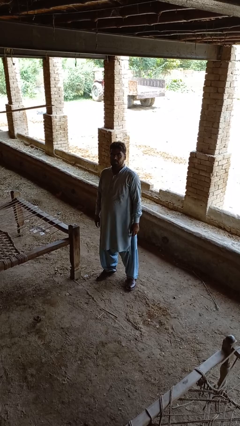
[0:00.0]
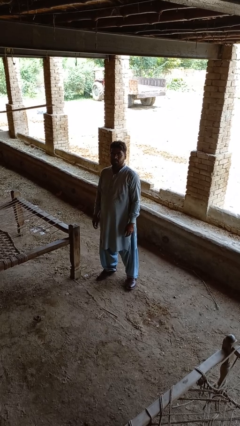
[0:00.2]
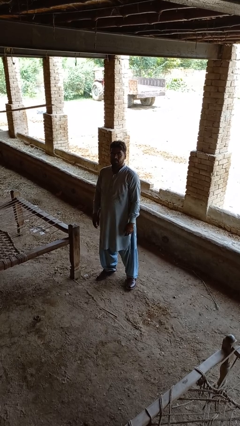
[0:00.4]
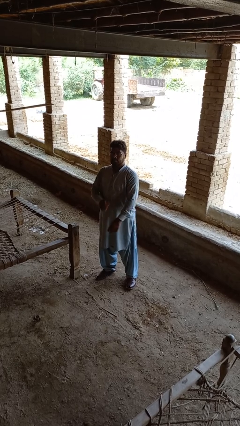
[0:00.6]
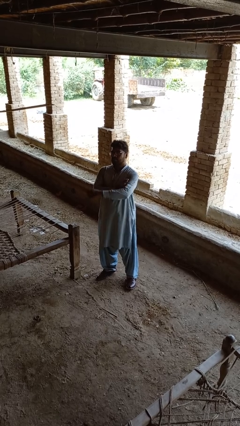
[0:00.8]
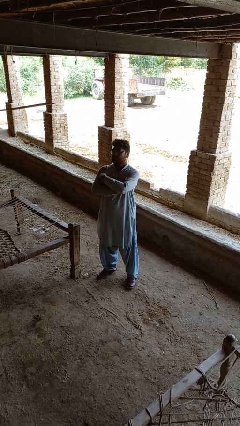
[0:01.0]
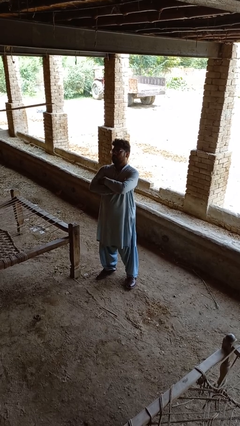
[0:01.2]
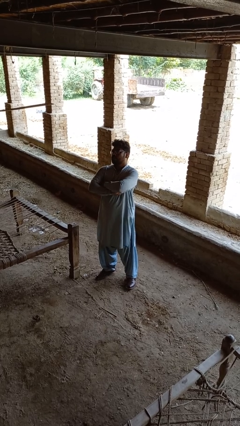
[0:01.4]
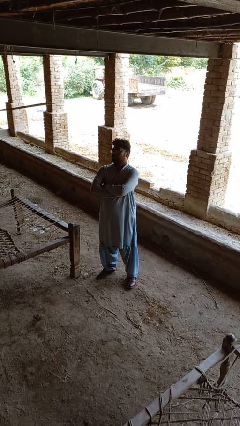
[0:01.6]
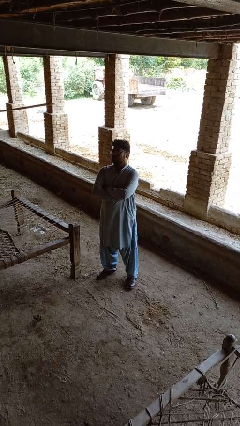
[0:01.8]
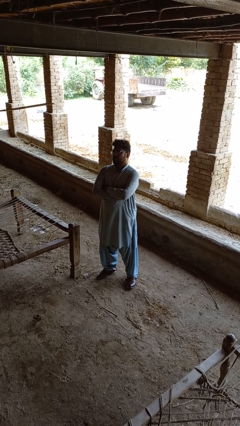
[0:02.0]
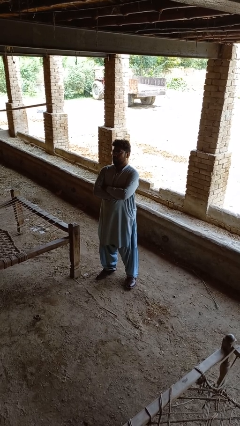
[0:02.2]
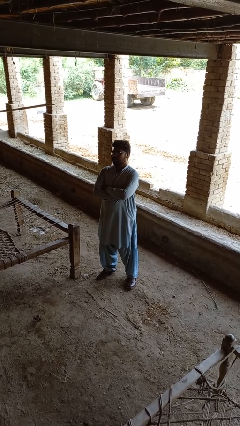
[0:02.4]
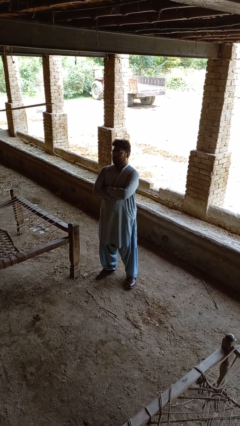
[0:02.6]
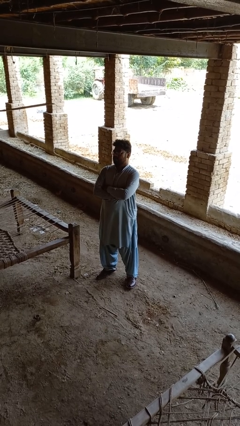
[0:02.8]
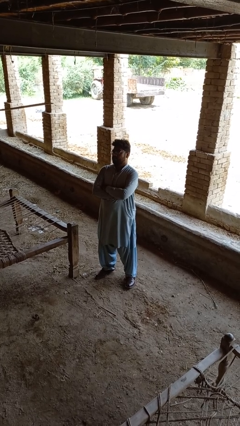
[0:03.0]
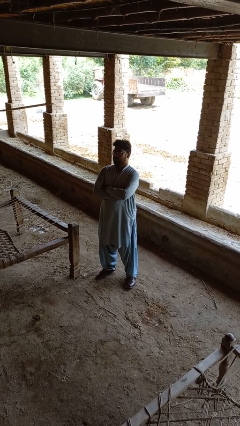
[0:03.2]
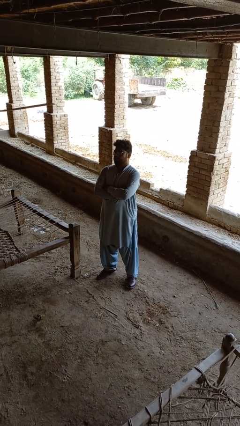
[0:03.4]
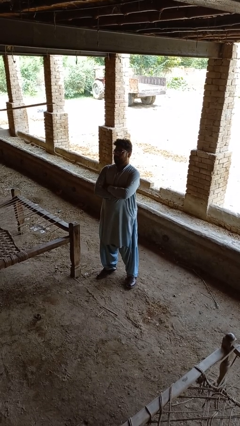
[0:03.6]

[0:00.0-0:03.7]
person crosses arms

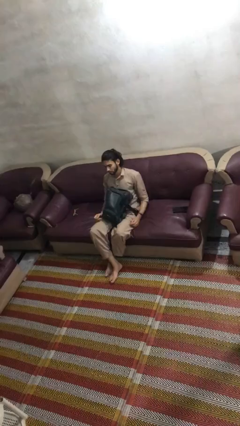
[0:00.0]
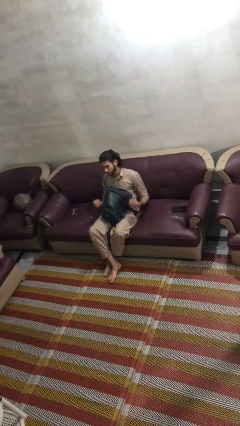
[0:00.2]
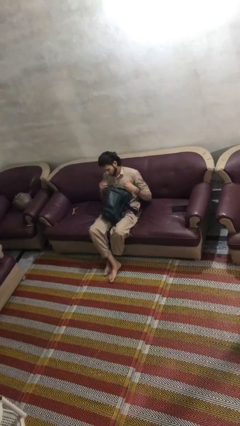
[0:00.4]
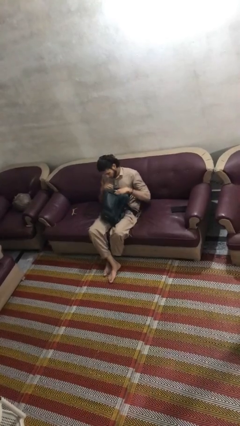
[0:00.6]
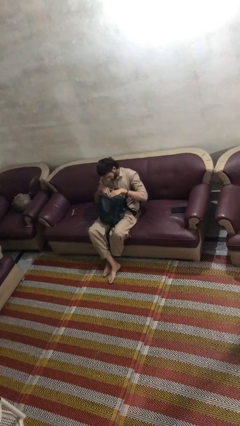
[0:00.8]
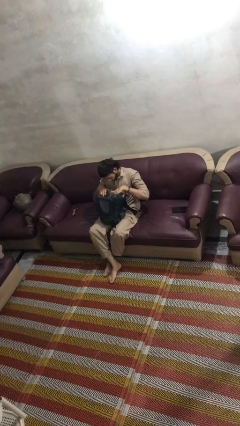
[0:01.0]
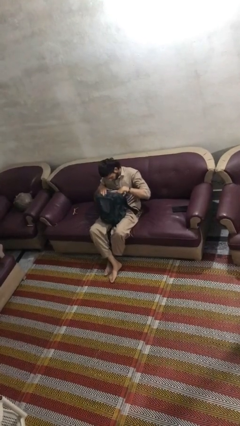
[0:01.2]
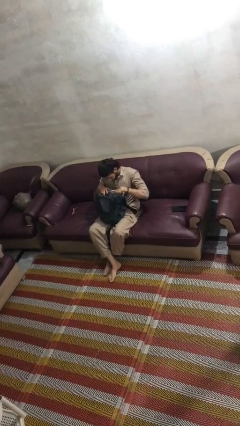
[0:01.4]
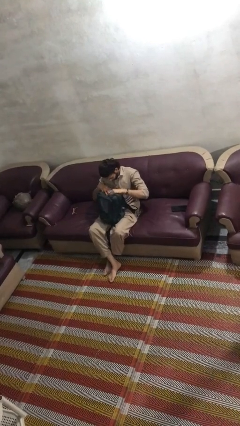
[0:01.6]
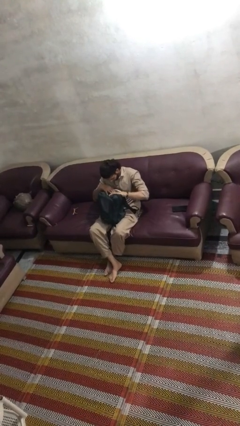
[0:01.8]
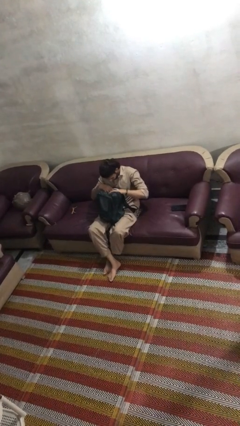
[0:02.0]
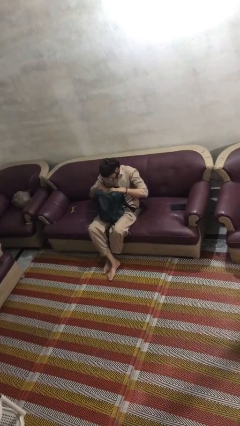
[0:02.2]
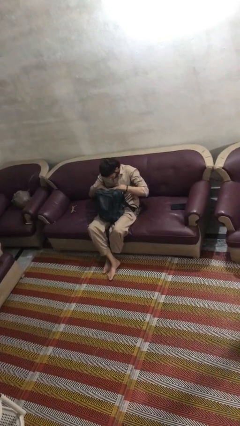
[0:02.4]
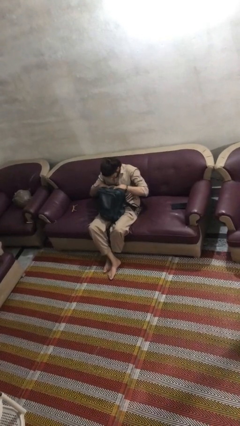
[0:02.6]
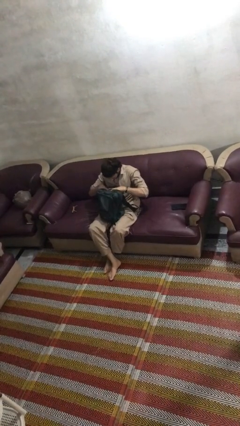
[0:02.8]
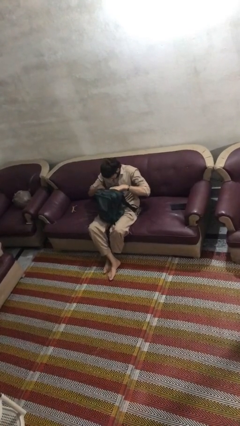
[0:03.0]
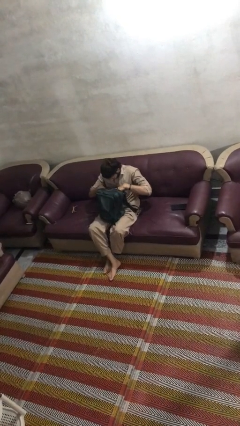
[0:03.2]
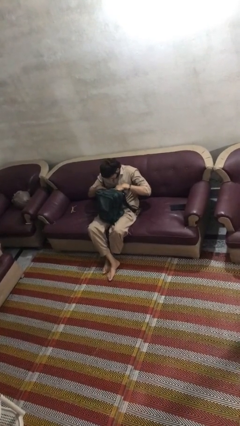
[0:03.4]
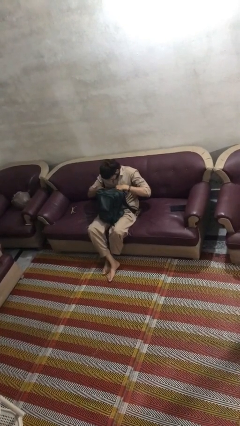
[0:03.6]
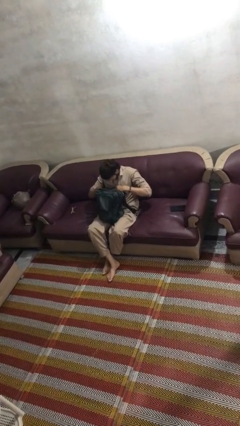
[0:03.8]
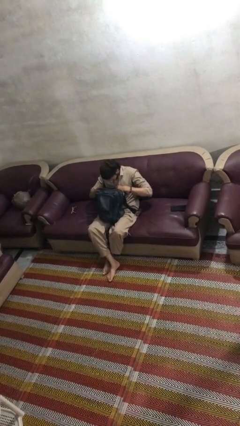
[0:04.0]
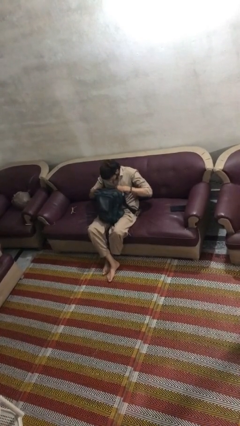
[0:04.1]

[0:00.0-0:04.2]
person searches in backpack

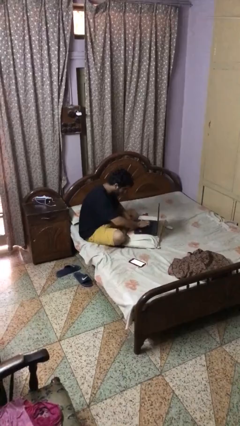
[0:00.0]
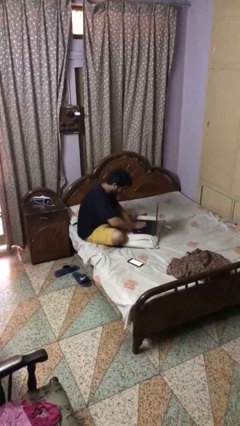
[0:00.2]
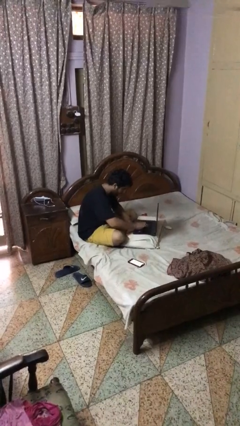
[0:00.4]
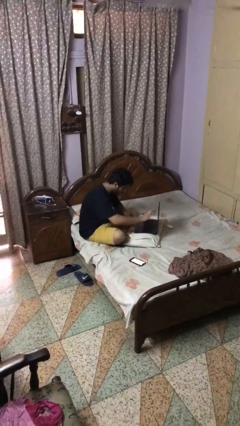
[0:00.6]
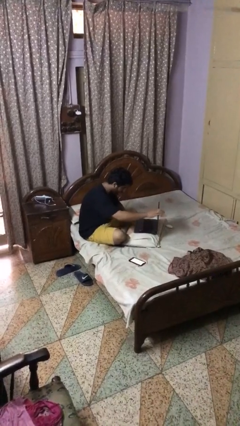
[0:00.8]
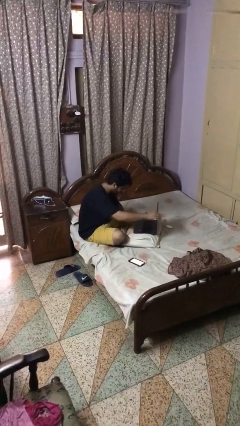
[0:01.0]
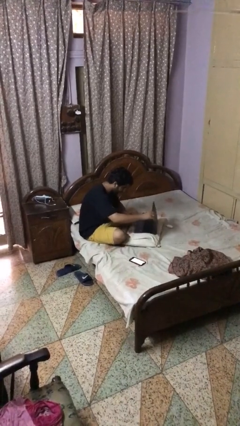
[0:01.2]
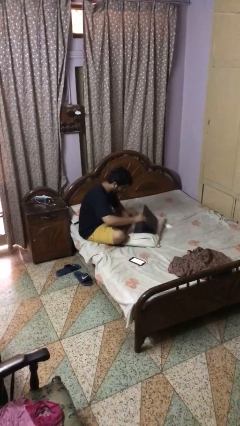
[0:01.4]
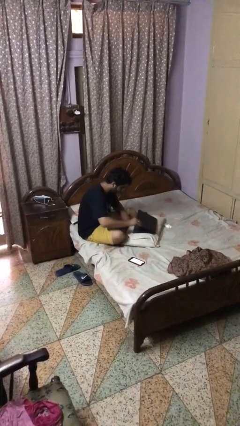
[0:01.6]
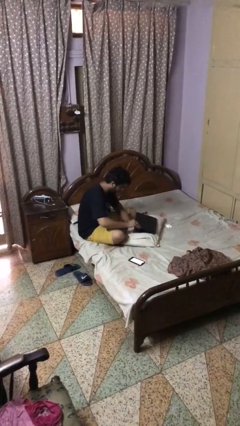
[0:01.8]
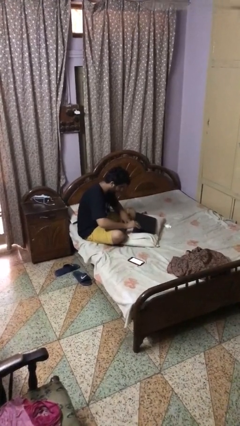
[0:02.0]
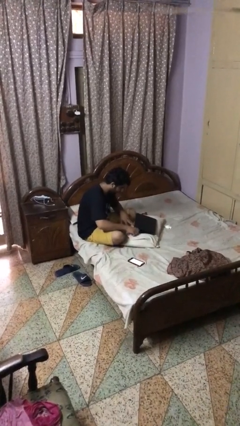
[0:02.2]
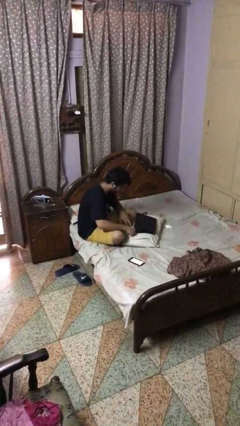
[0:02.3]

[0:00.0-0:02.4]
person closes laptop

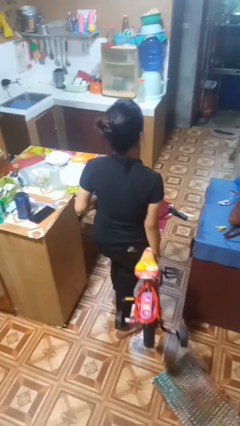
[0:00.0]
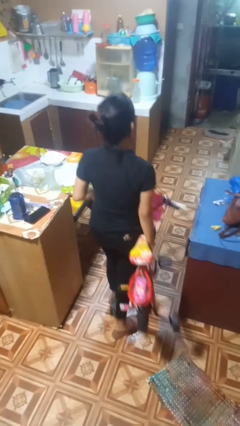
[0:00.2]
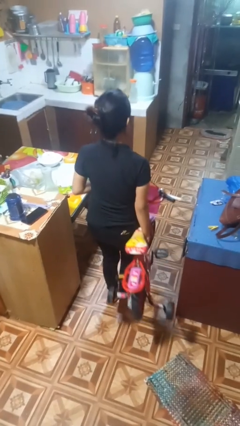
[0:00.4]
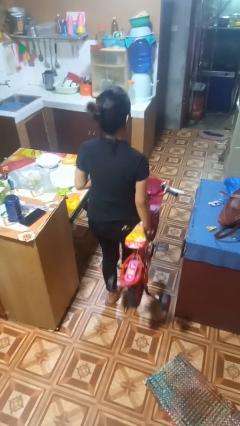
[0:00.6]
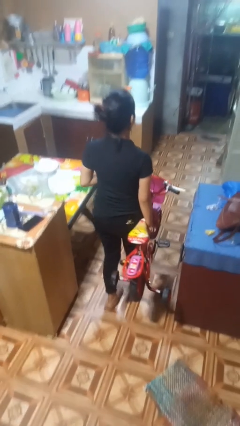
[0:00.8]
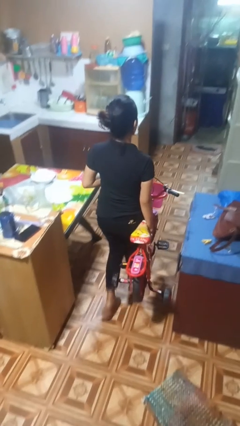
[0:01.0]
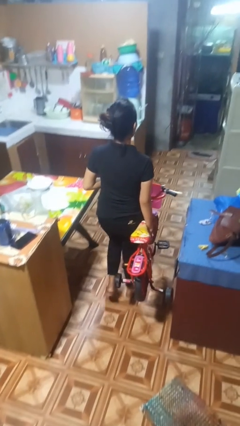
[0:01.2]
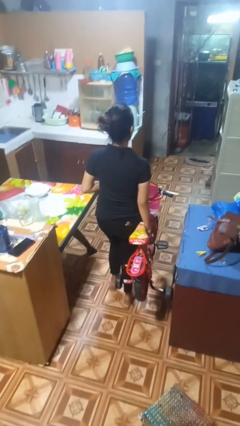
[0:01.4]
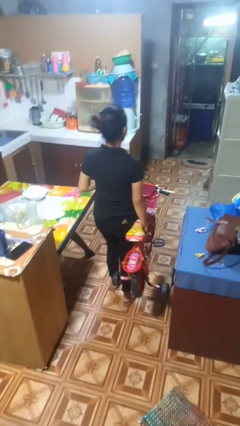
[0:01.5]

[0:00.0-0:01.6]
person carries bicycle

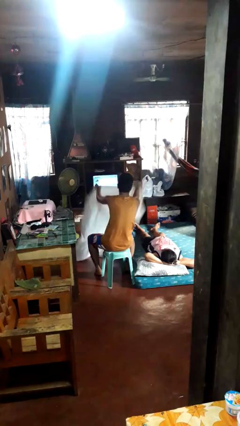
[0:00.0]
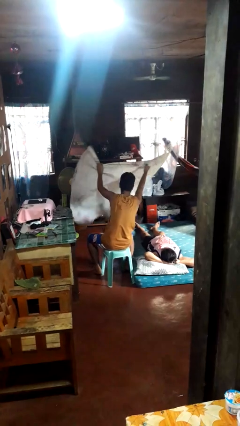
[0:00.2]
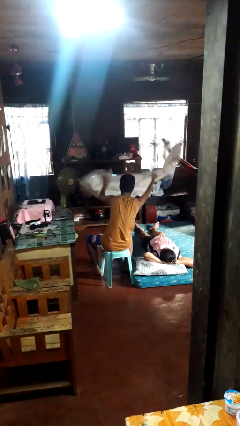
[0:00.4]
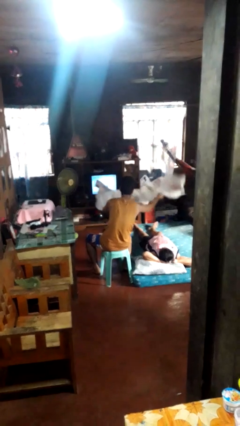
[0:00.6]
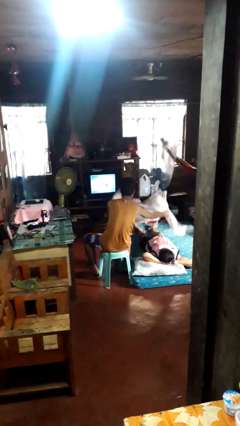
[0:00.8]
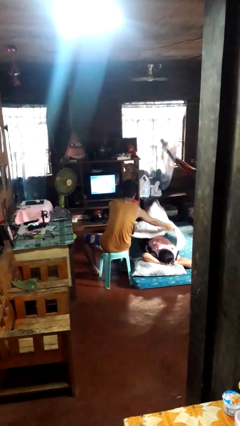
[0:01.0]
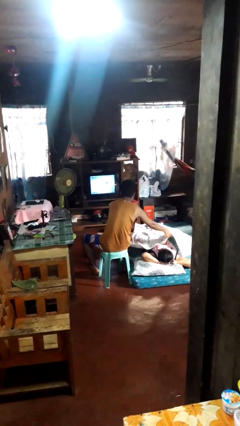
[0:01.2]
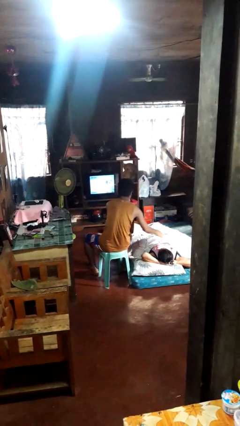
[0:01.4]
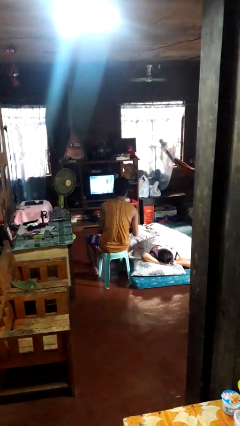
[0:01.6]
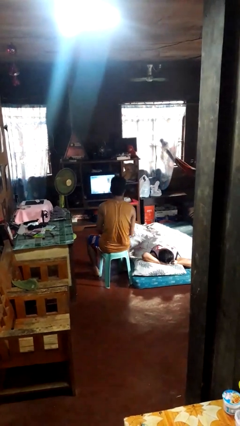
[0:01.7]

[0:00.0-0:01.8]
person covers friend with blanket

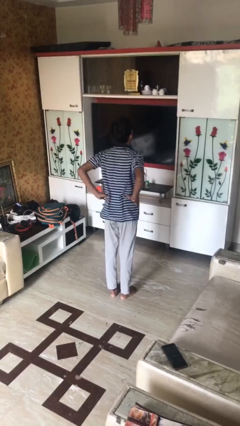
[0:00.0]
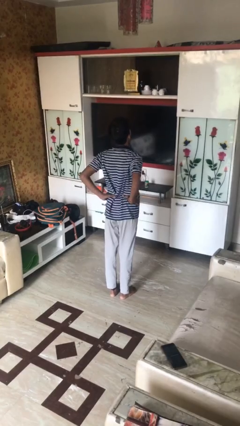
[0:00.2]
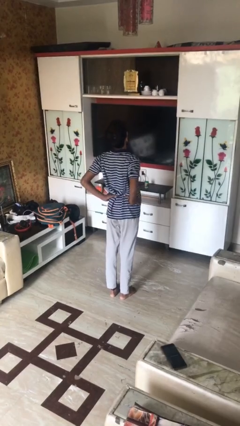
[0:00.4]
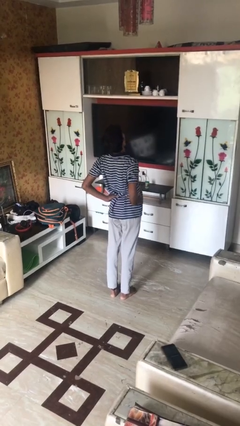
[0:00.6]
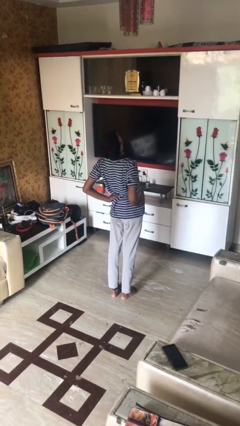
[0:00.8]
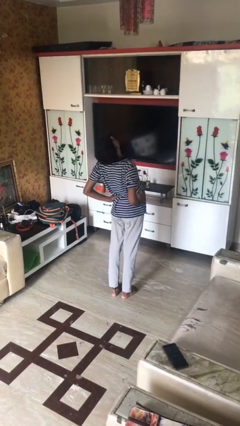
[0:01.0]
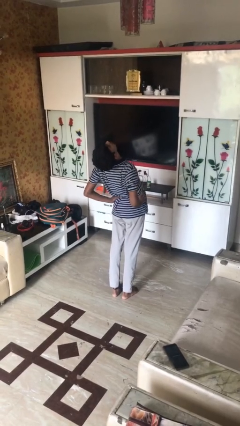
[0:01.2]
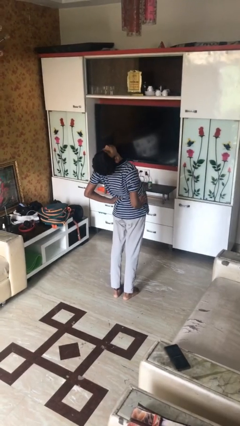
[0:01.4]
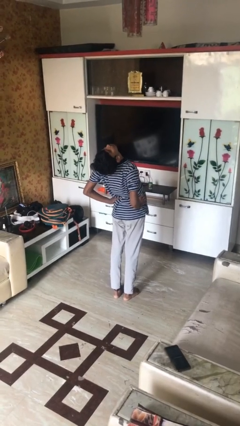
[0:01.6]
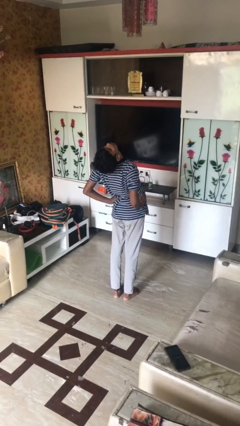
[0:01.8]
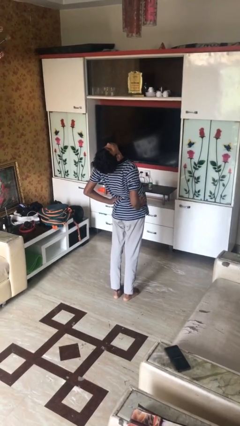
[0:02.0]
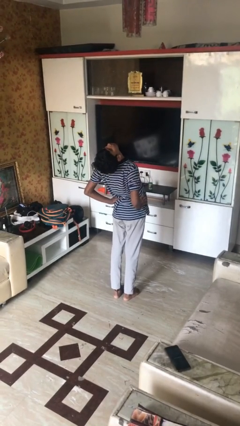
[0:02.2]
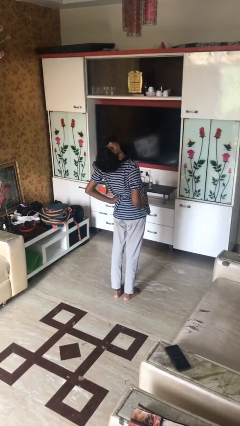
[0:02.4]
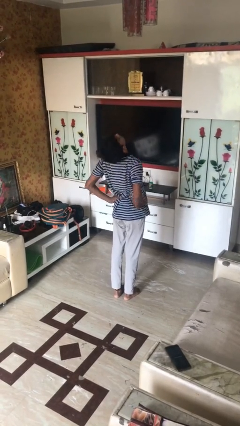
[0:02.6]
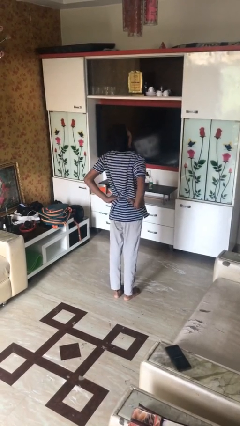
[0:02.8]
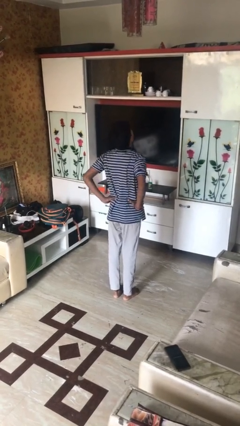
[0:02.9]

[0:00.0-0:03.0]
person stretches back

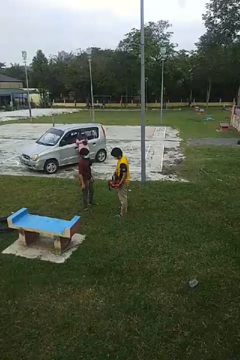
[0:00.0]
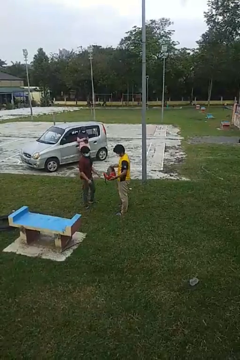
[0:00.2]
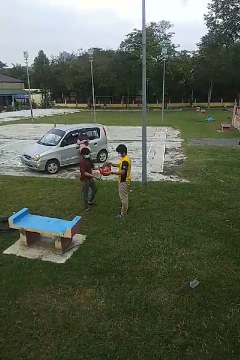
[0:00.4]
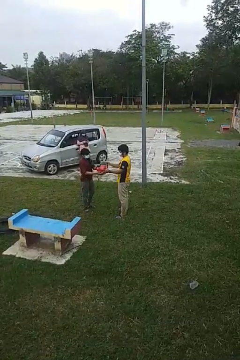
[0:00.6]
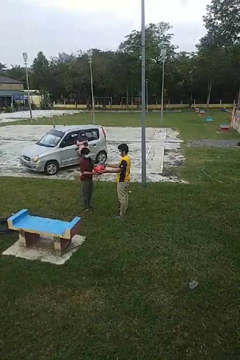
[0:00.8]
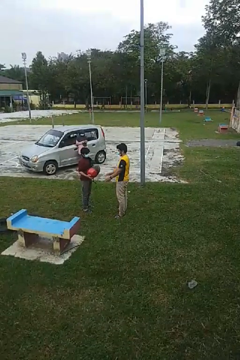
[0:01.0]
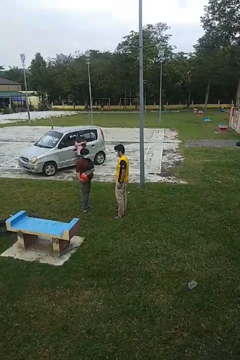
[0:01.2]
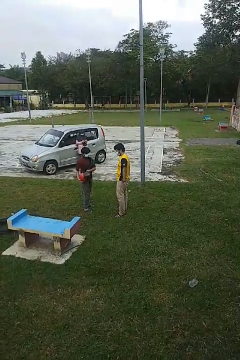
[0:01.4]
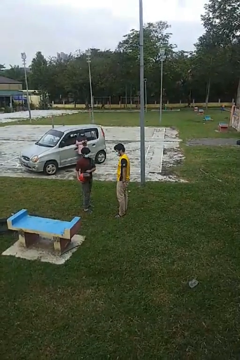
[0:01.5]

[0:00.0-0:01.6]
person transfers object to person
